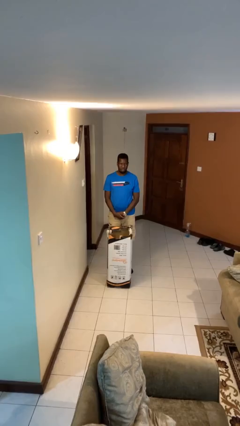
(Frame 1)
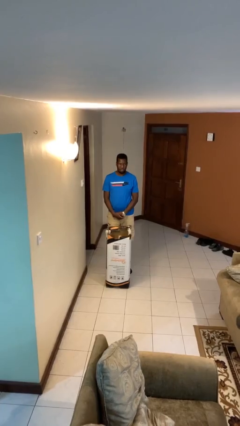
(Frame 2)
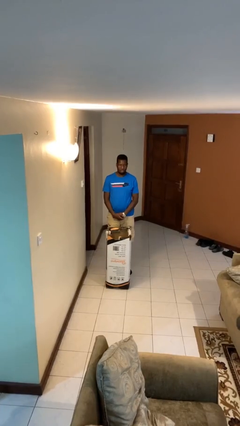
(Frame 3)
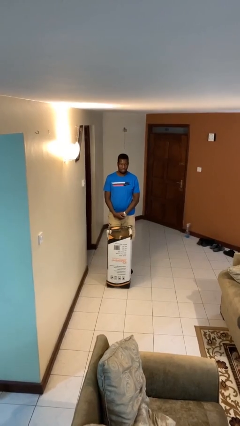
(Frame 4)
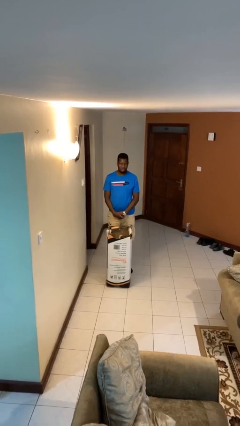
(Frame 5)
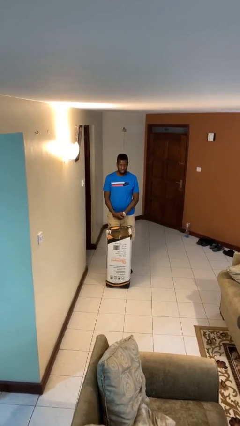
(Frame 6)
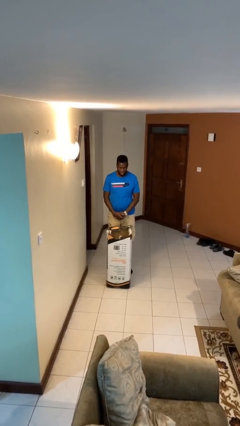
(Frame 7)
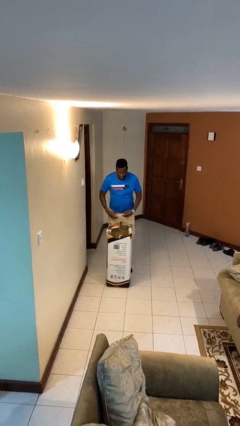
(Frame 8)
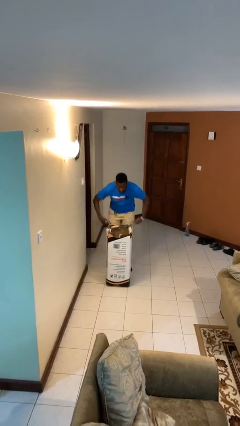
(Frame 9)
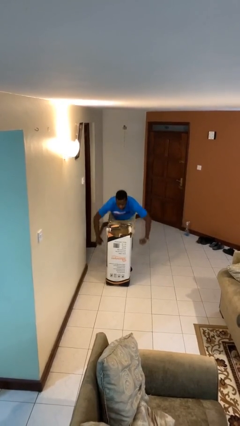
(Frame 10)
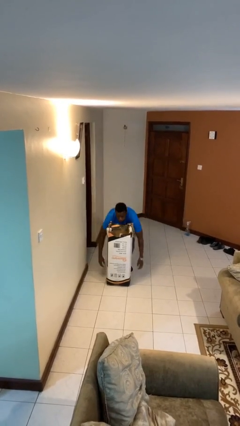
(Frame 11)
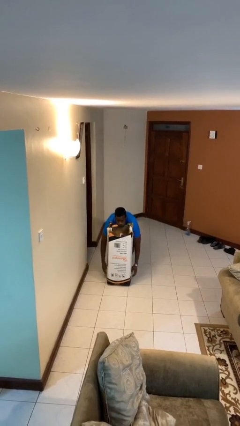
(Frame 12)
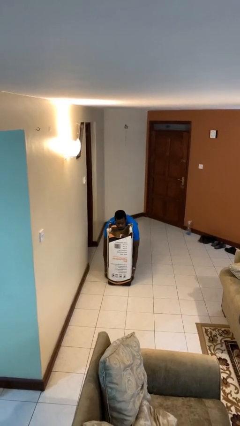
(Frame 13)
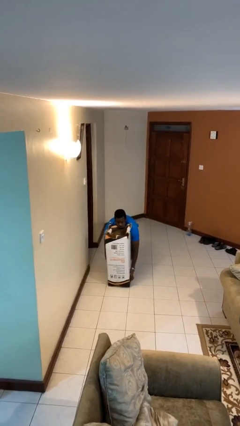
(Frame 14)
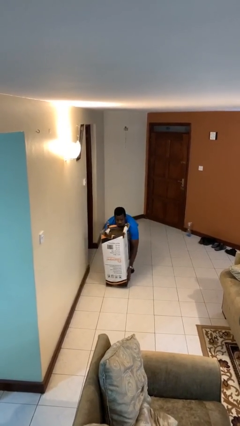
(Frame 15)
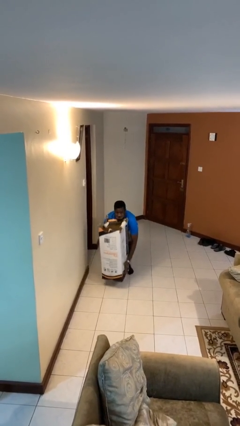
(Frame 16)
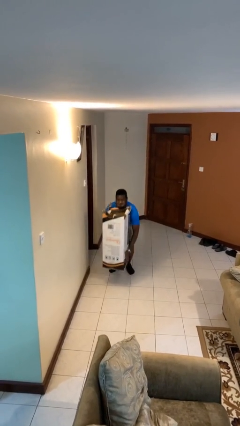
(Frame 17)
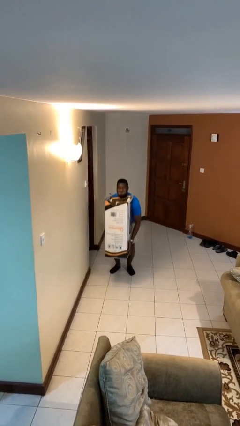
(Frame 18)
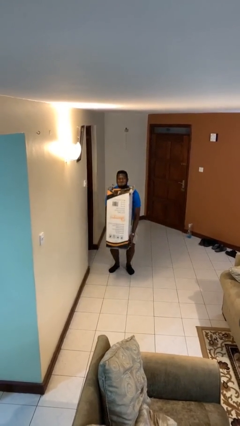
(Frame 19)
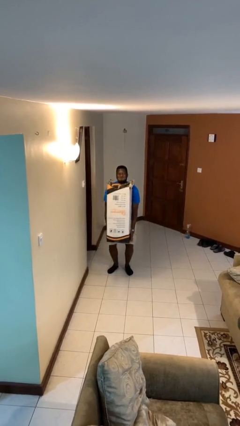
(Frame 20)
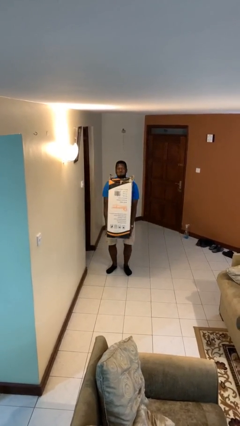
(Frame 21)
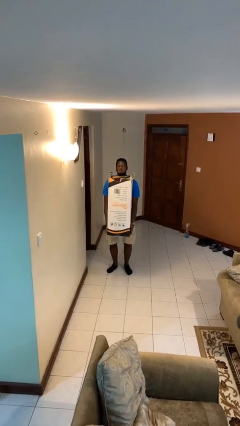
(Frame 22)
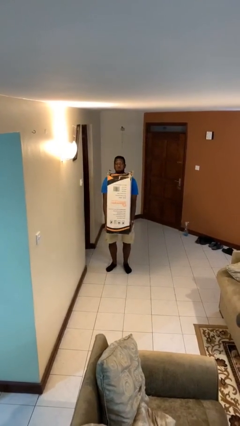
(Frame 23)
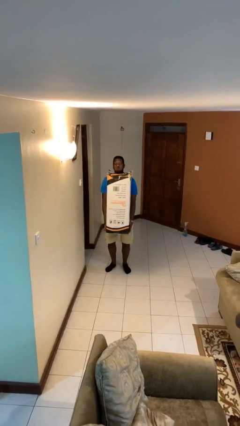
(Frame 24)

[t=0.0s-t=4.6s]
person picks up object from floor

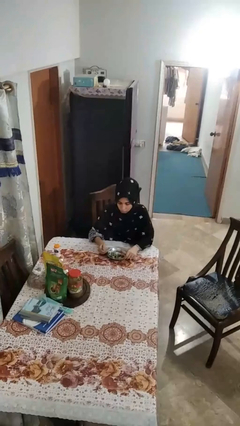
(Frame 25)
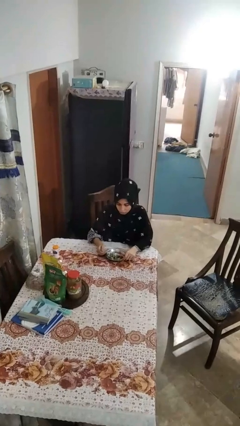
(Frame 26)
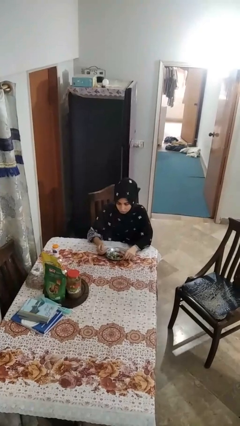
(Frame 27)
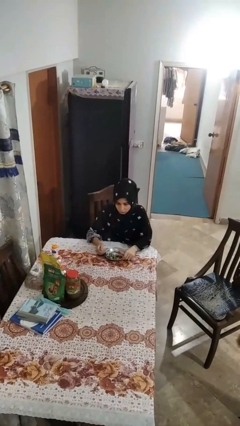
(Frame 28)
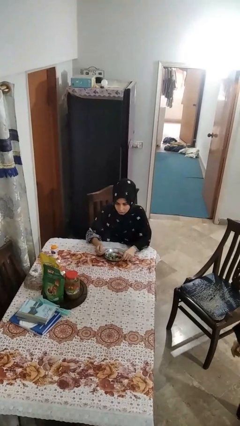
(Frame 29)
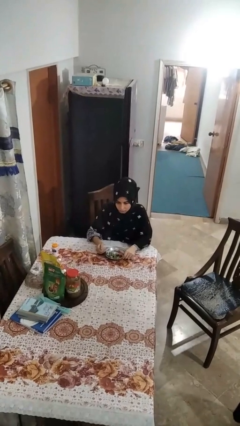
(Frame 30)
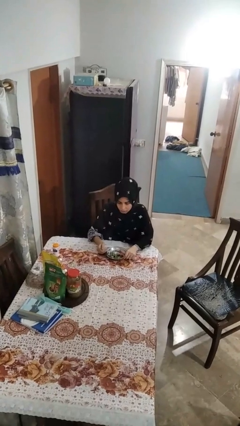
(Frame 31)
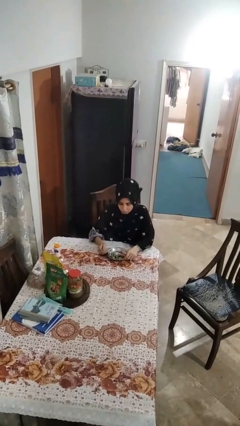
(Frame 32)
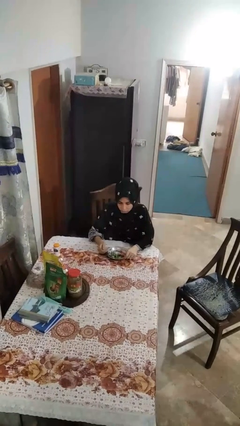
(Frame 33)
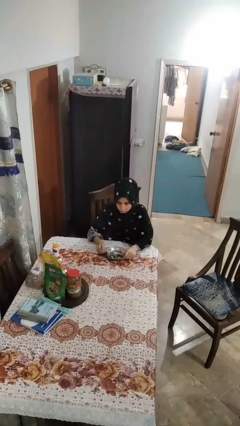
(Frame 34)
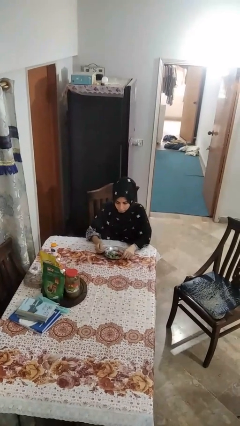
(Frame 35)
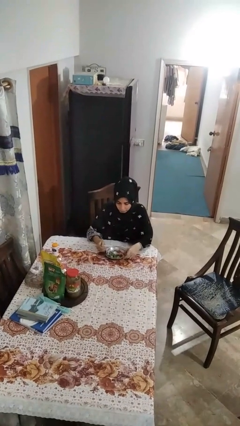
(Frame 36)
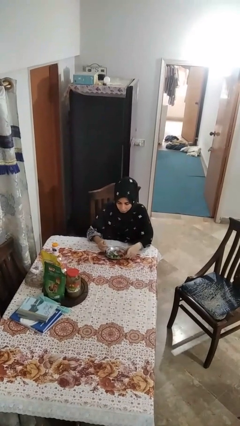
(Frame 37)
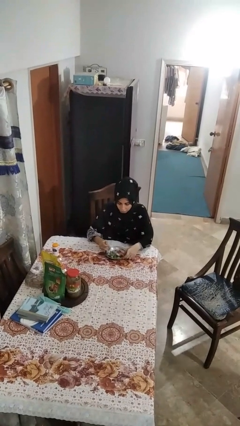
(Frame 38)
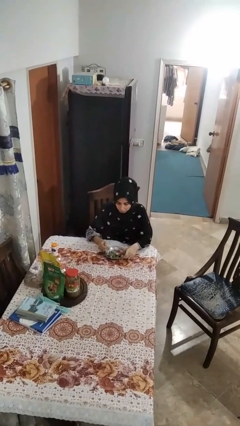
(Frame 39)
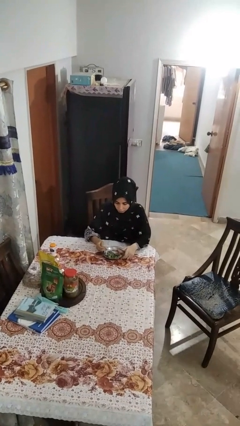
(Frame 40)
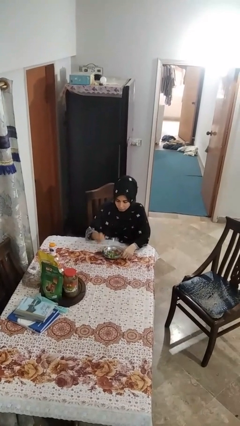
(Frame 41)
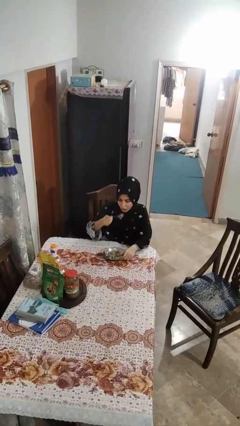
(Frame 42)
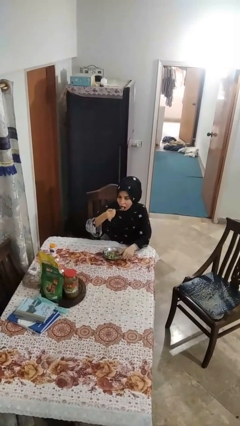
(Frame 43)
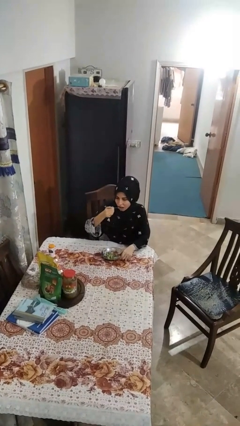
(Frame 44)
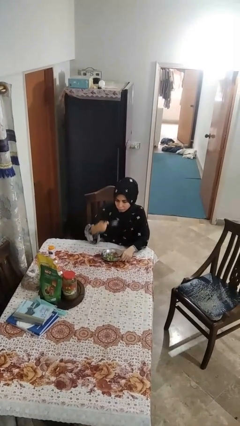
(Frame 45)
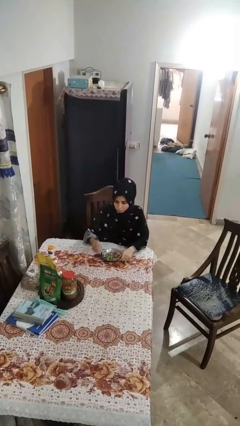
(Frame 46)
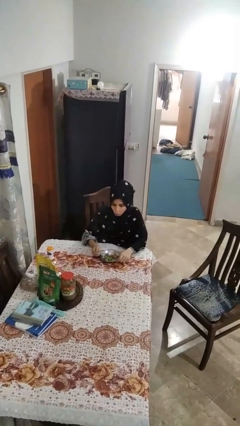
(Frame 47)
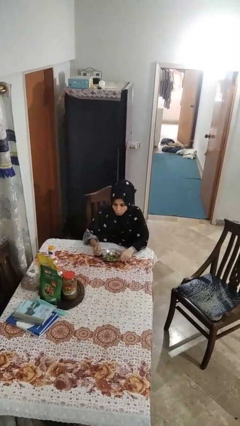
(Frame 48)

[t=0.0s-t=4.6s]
person eats with utensil

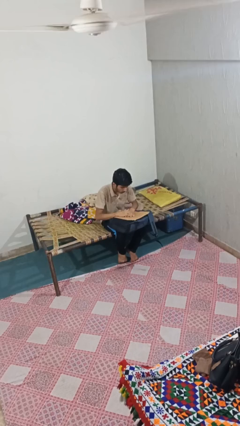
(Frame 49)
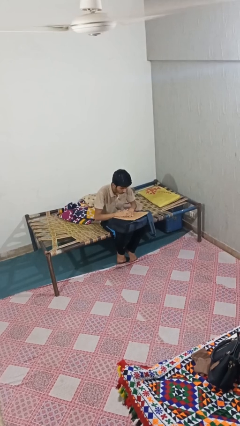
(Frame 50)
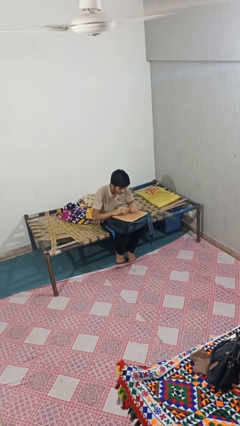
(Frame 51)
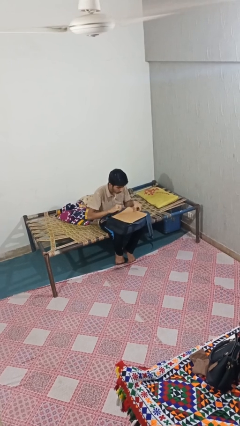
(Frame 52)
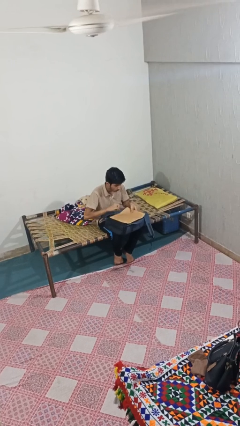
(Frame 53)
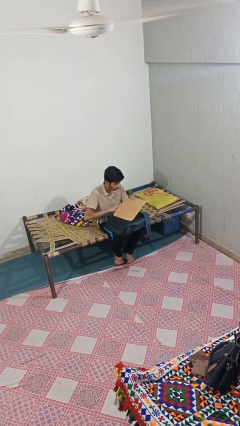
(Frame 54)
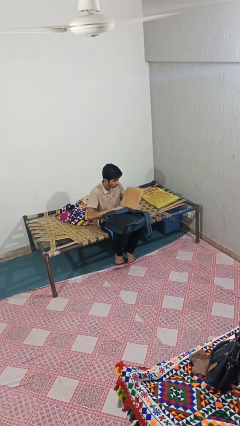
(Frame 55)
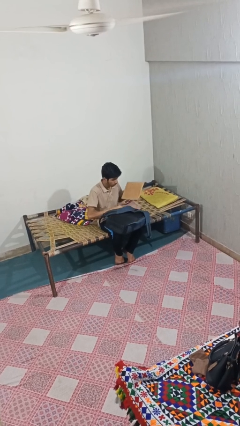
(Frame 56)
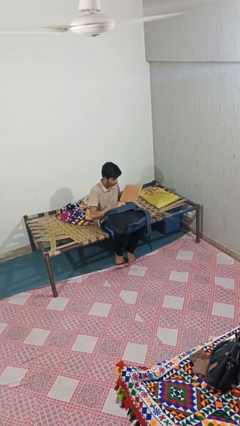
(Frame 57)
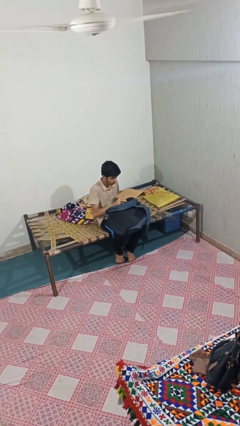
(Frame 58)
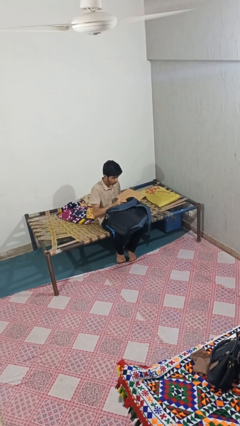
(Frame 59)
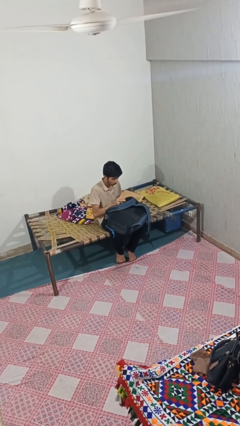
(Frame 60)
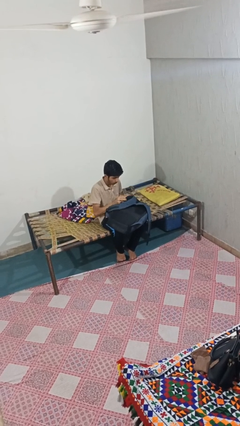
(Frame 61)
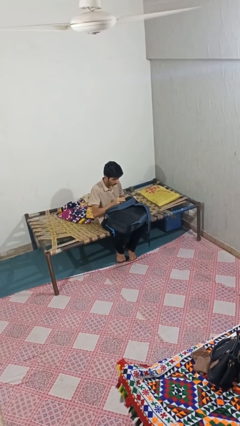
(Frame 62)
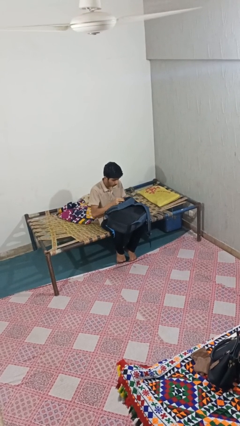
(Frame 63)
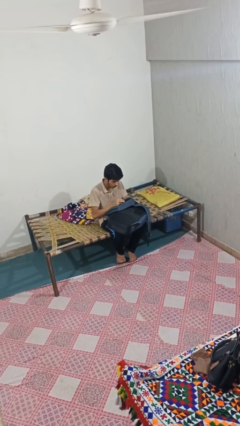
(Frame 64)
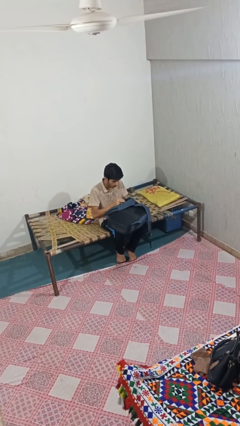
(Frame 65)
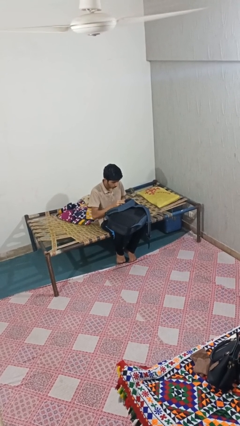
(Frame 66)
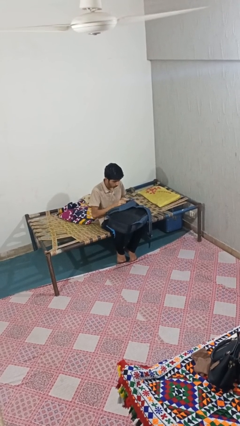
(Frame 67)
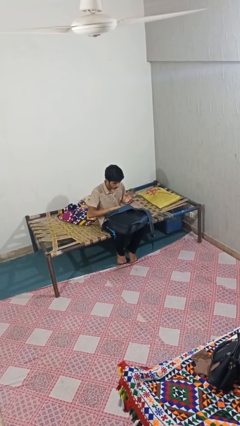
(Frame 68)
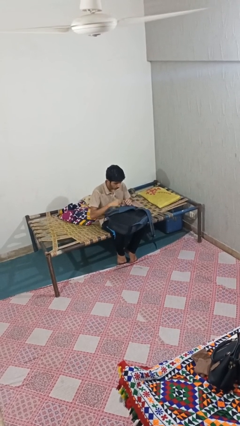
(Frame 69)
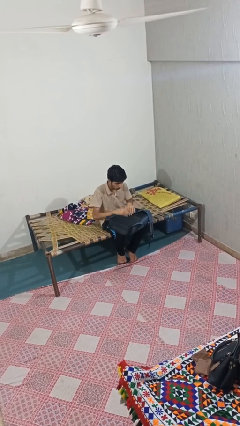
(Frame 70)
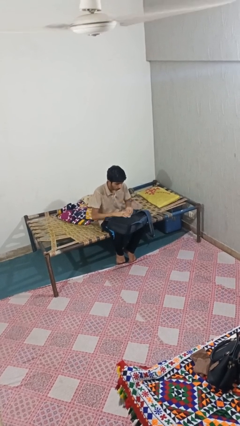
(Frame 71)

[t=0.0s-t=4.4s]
person puts object into backpack

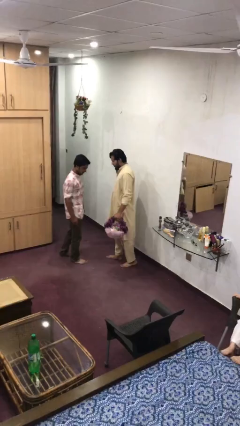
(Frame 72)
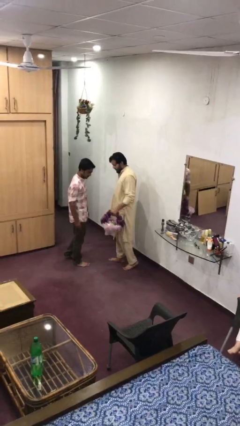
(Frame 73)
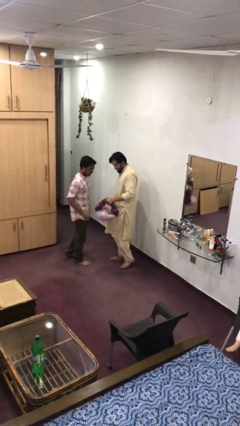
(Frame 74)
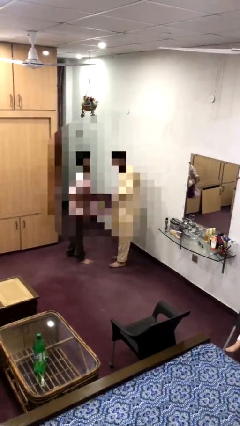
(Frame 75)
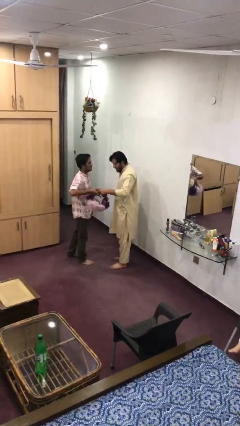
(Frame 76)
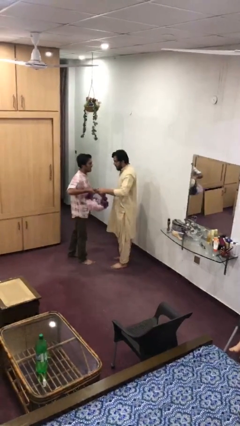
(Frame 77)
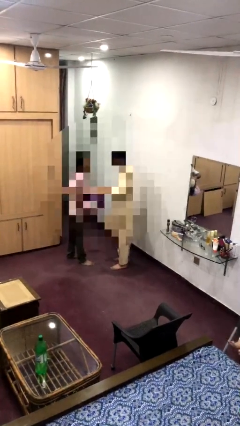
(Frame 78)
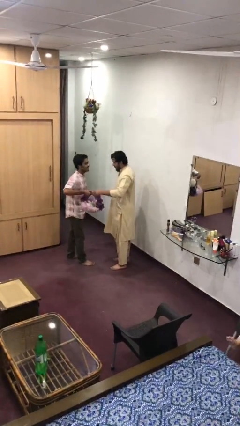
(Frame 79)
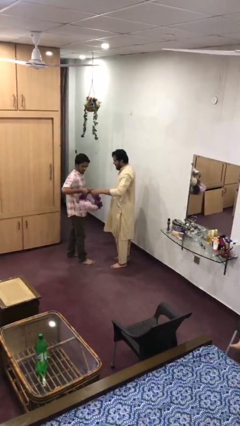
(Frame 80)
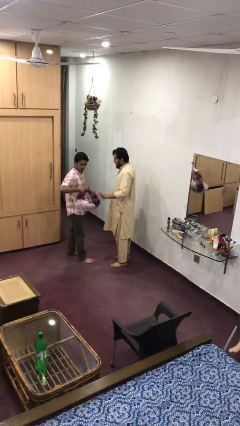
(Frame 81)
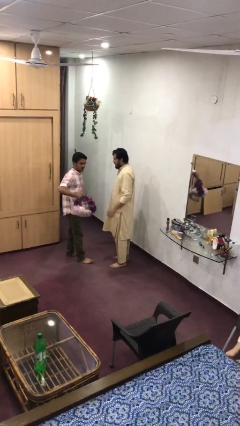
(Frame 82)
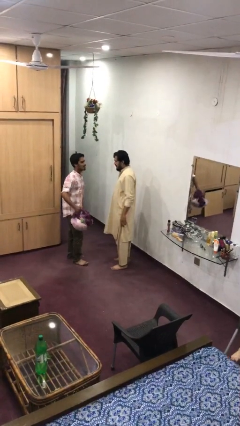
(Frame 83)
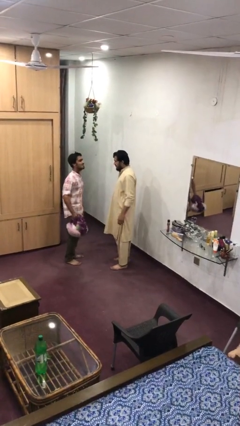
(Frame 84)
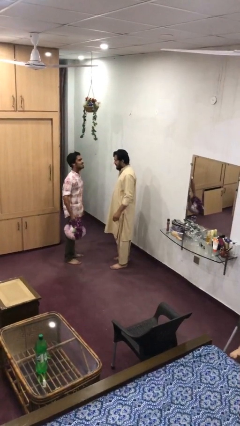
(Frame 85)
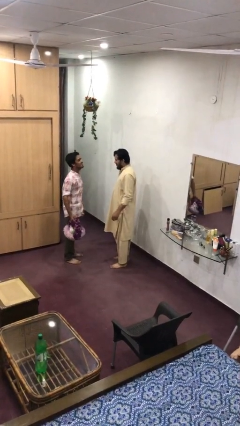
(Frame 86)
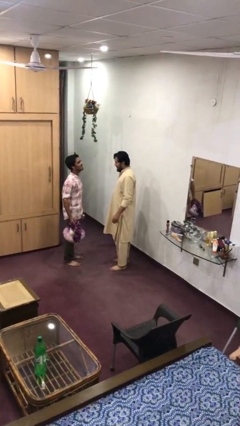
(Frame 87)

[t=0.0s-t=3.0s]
person transfers object to person

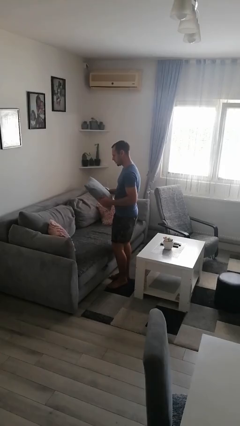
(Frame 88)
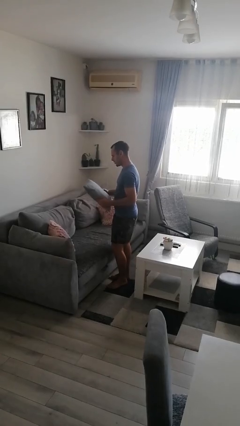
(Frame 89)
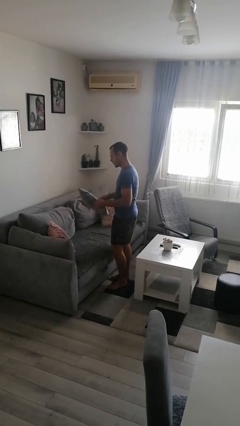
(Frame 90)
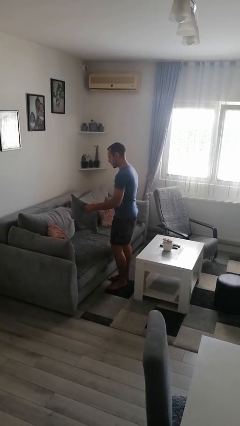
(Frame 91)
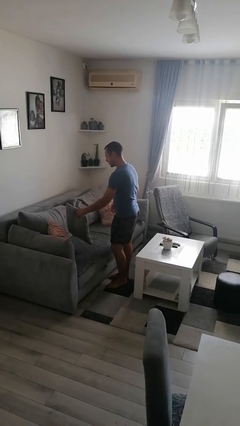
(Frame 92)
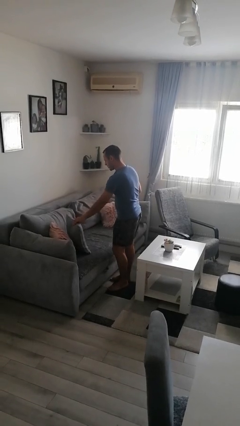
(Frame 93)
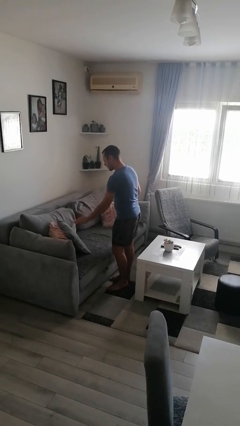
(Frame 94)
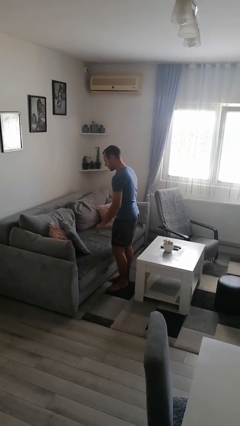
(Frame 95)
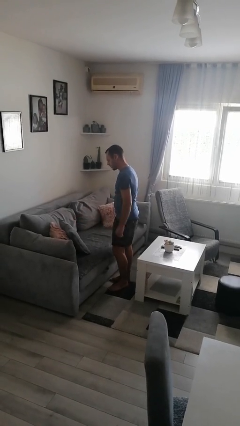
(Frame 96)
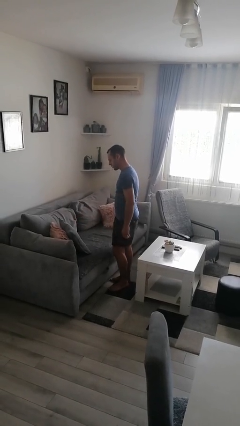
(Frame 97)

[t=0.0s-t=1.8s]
person puts down object on couch
